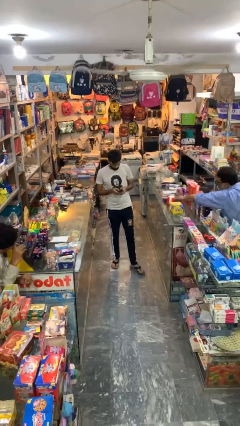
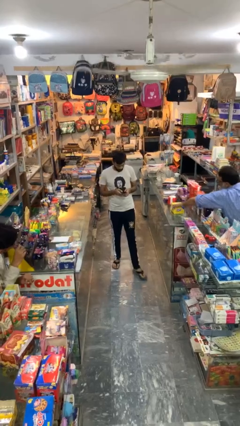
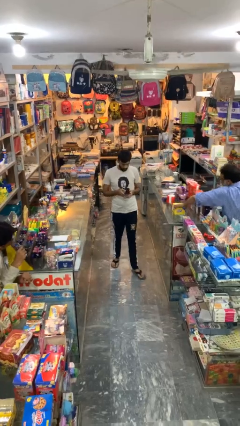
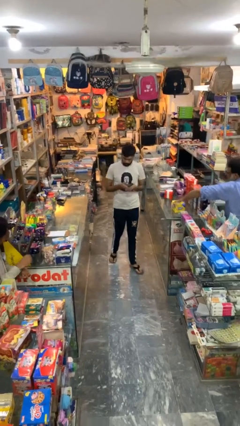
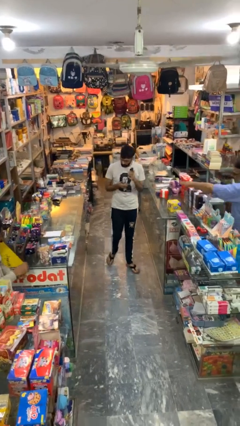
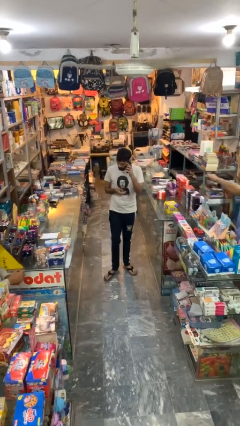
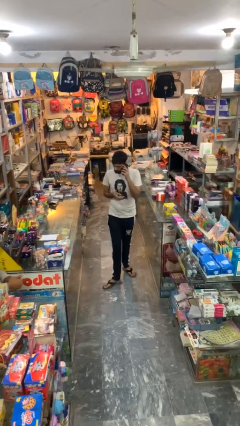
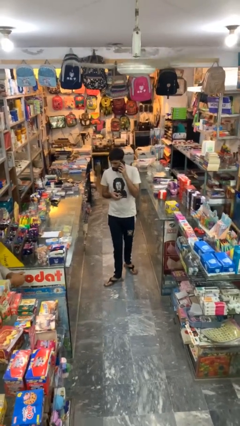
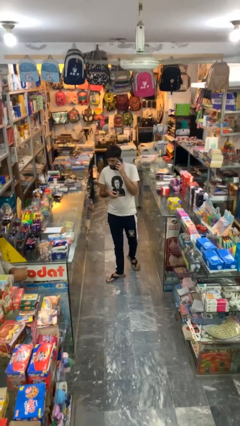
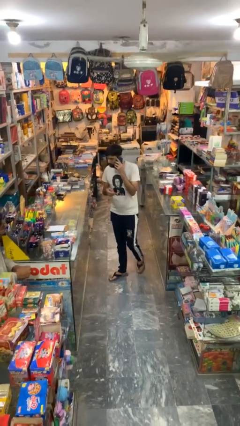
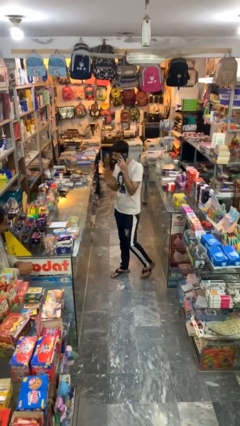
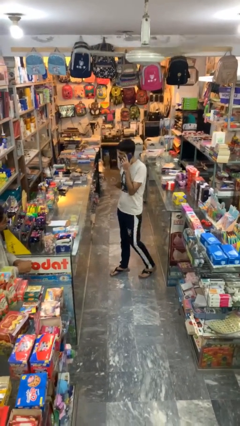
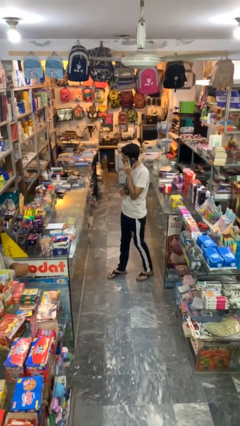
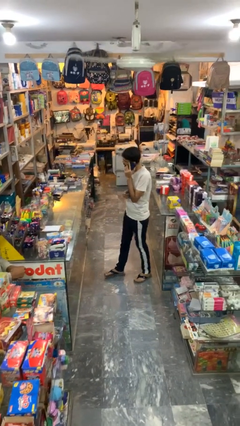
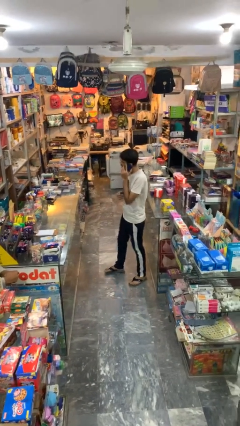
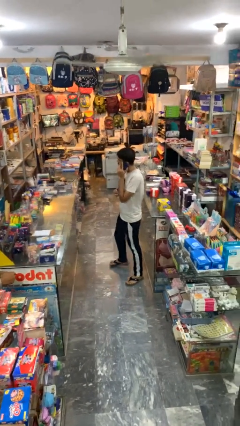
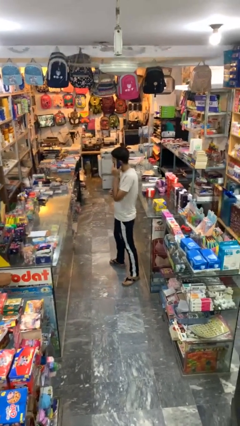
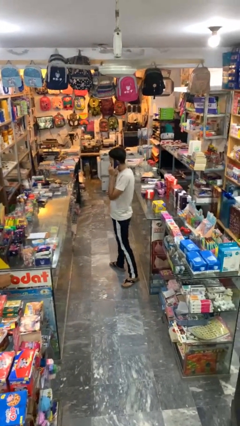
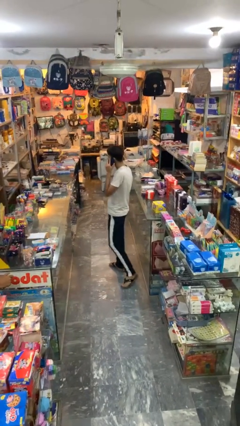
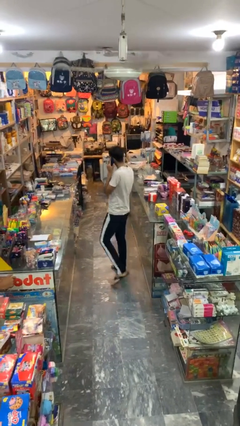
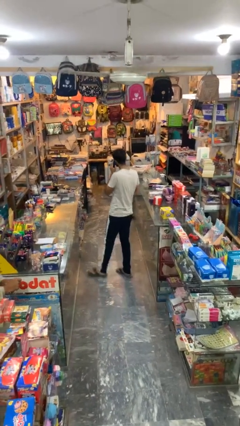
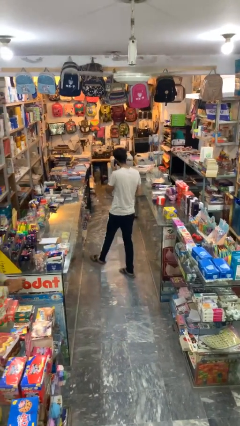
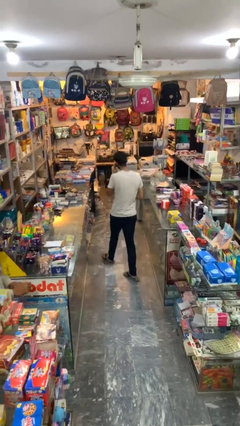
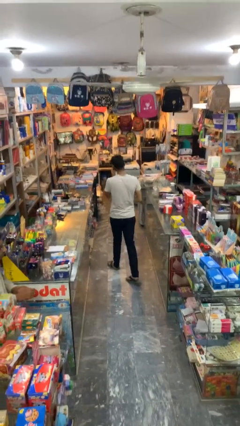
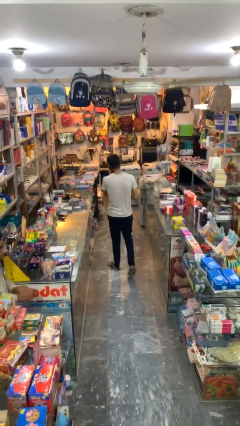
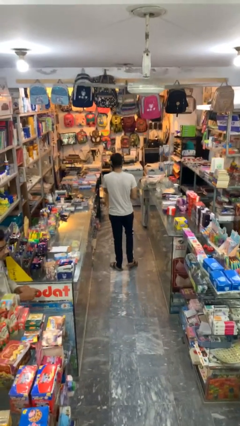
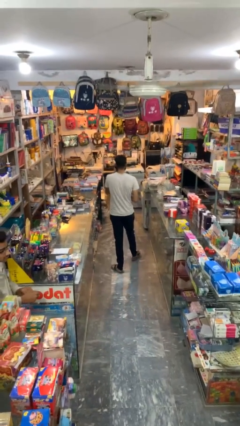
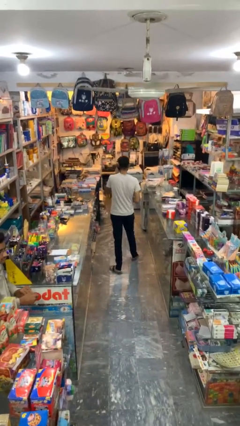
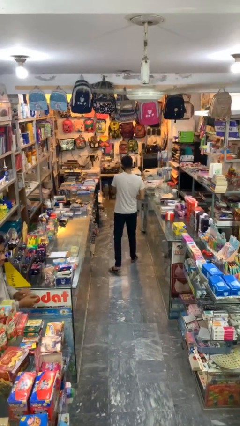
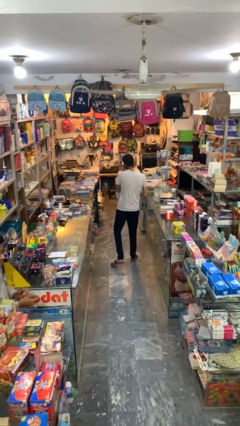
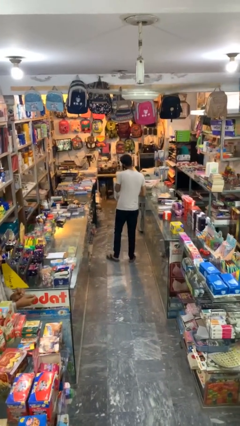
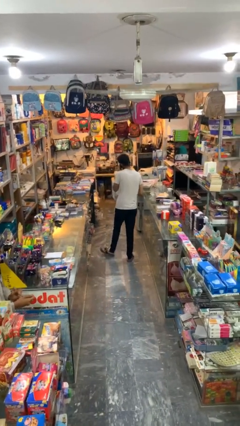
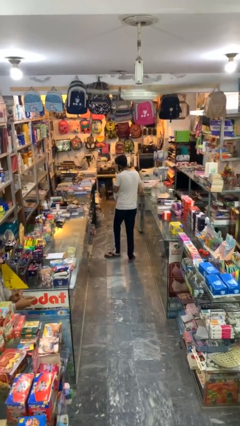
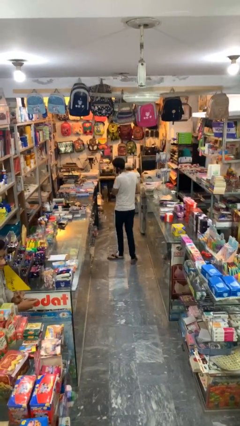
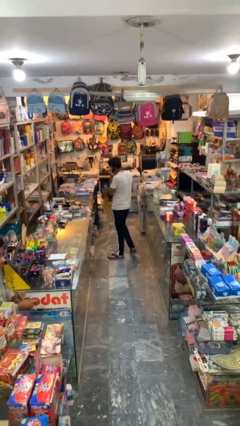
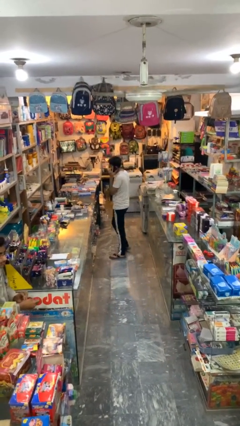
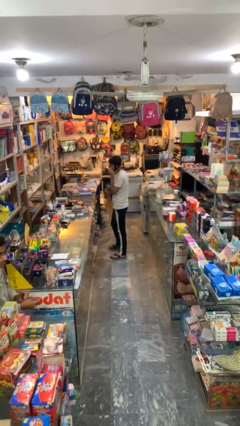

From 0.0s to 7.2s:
person talks on phone

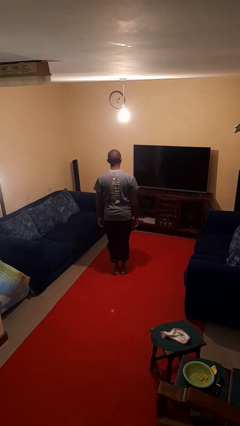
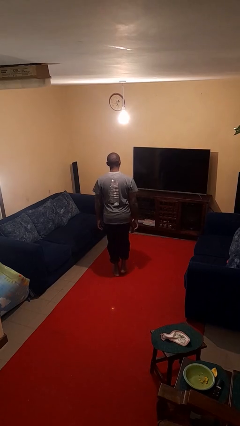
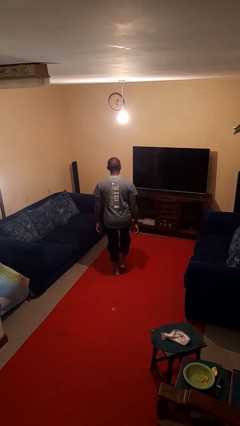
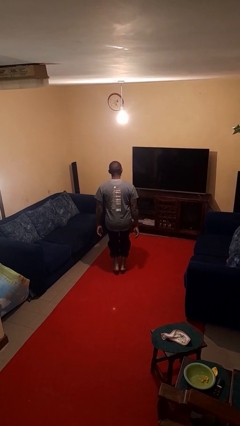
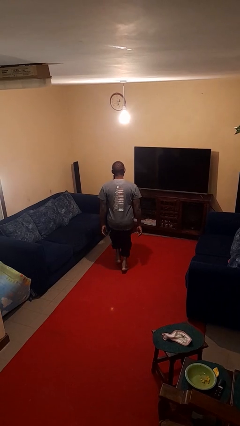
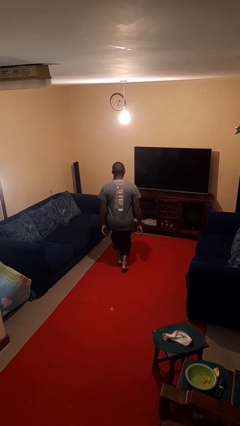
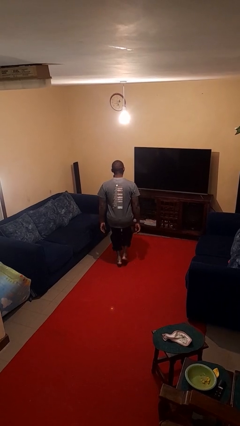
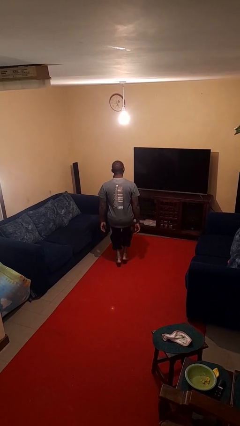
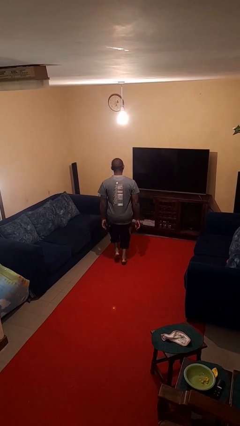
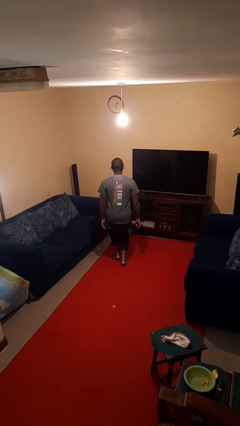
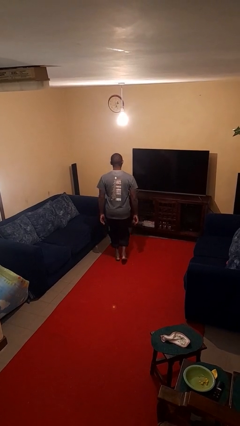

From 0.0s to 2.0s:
person walks tiptoe

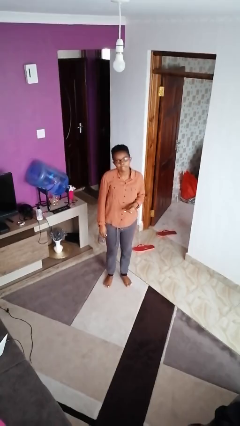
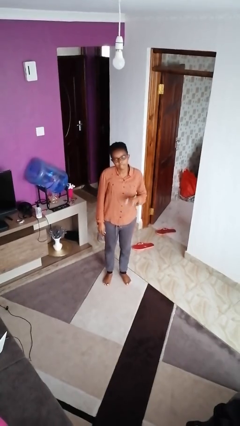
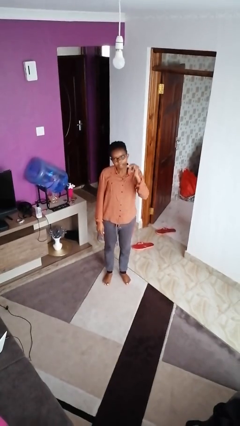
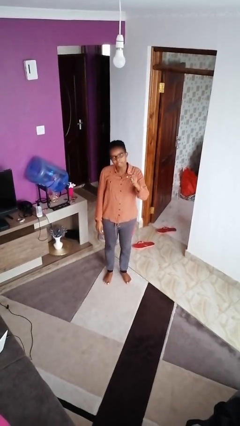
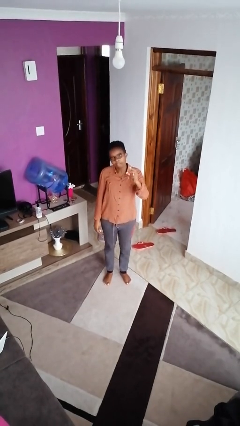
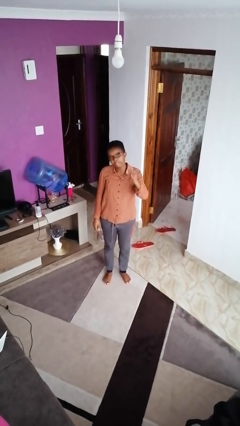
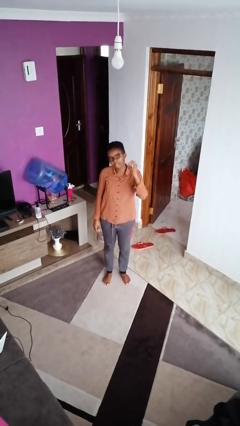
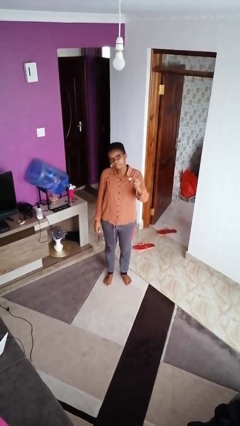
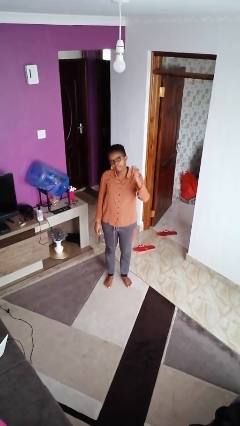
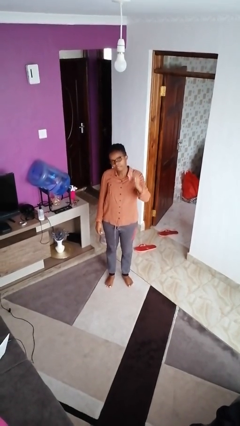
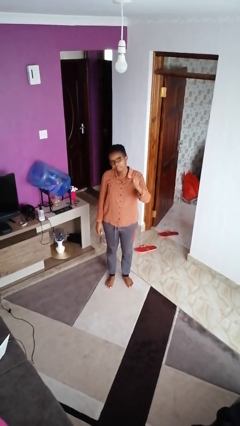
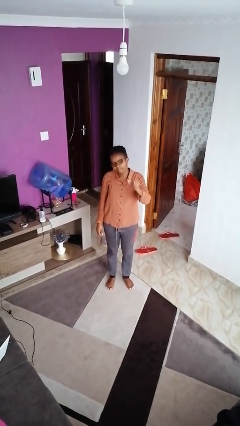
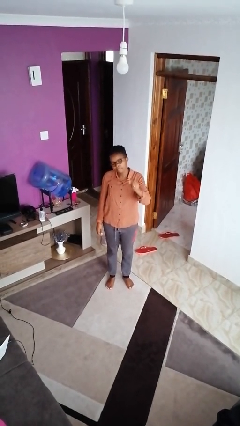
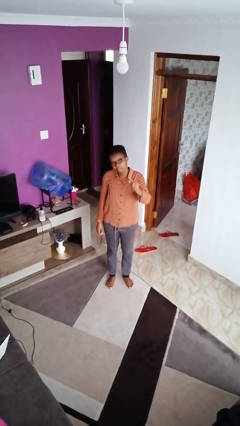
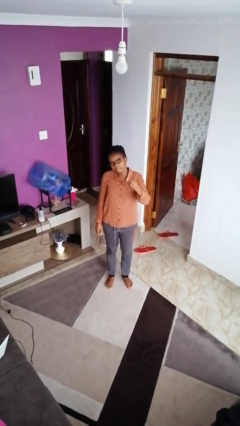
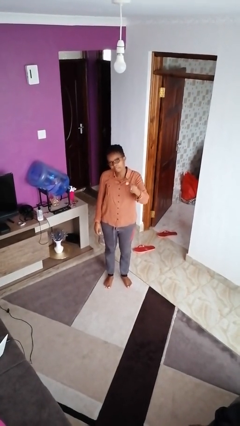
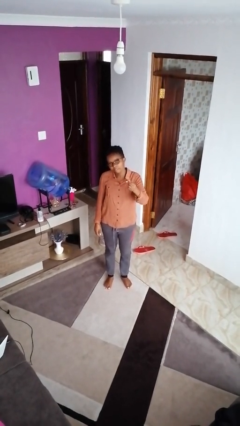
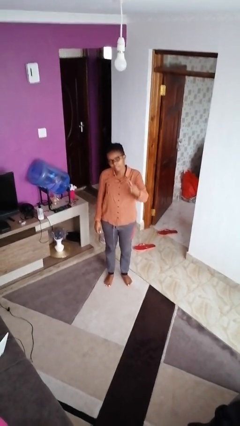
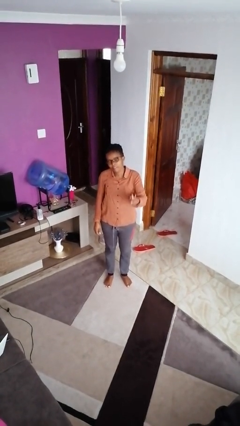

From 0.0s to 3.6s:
person snaps fingers

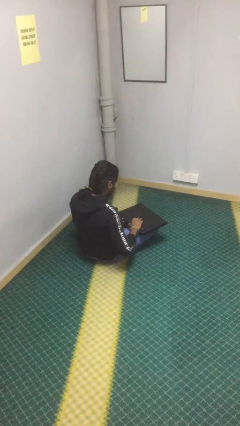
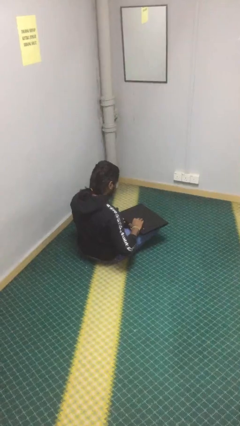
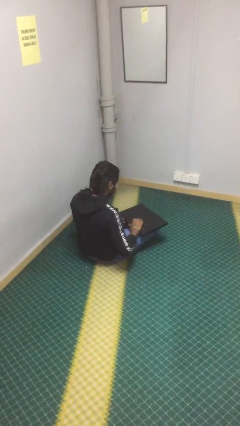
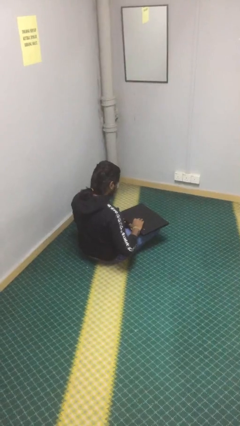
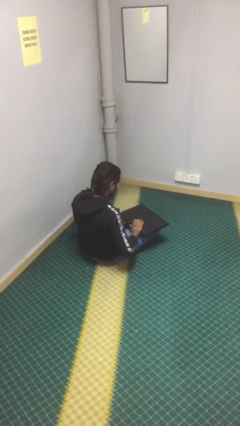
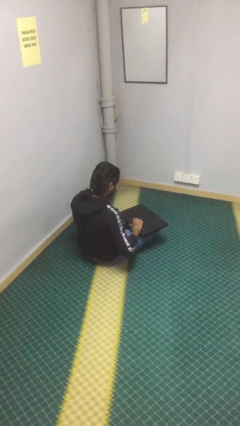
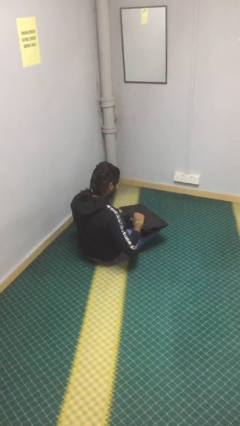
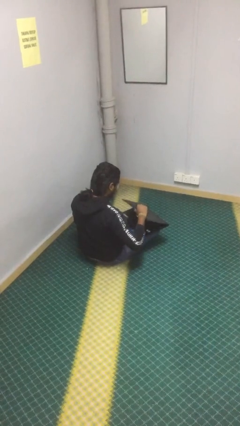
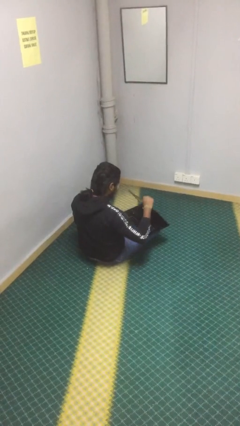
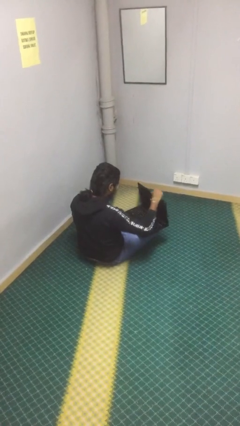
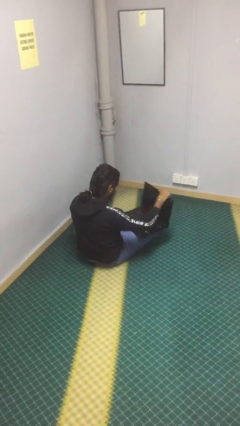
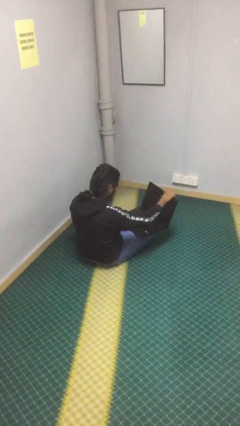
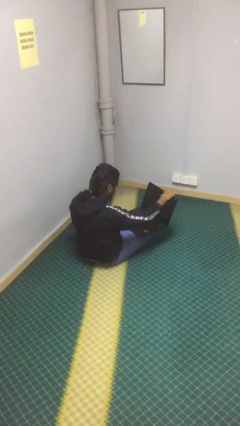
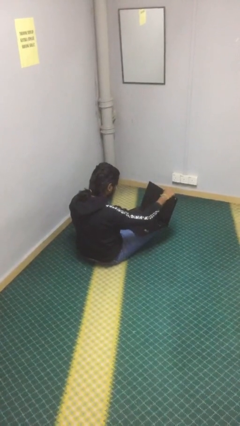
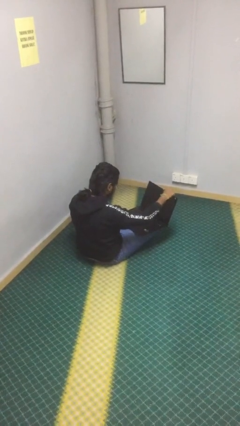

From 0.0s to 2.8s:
person opens laptop

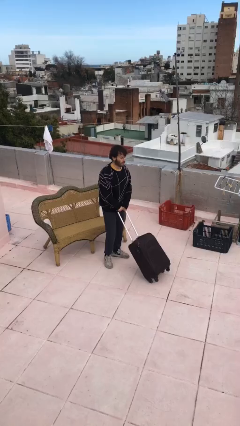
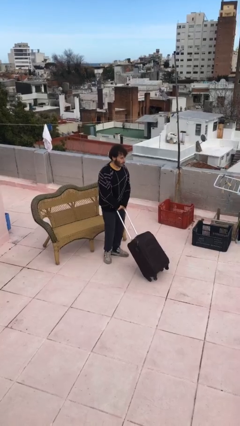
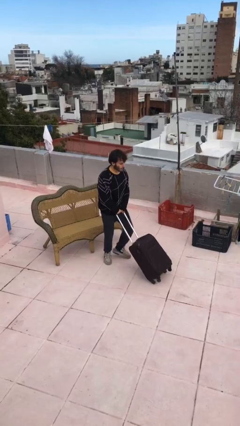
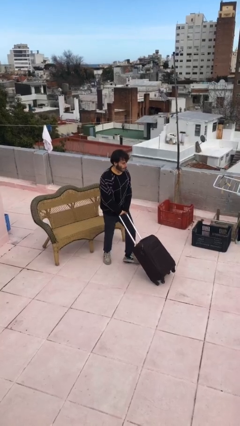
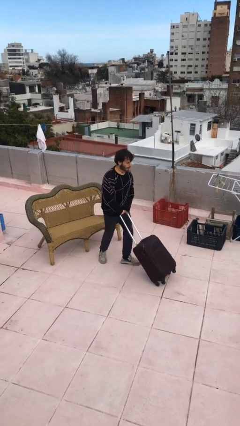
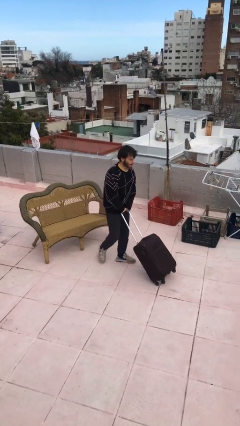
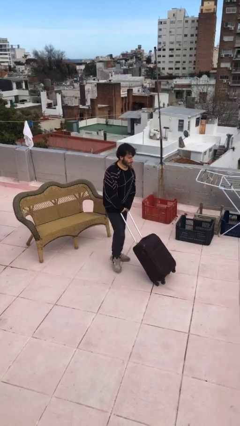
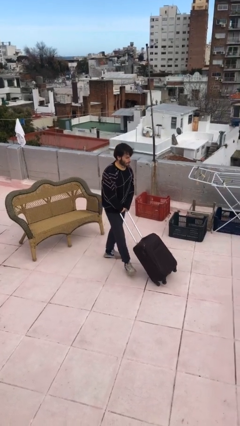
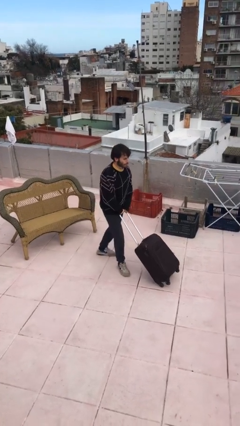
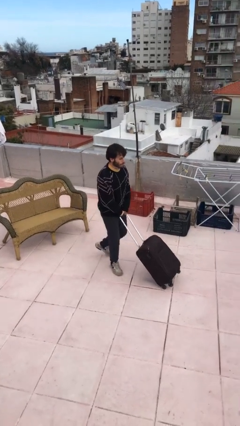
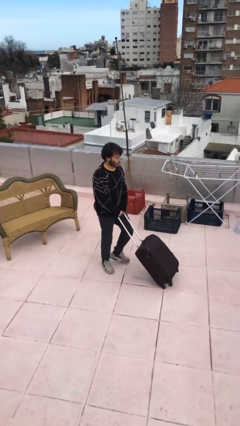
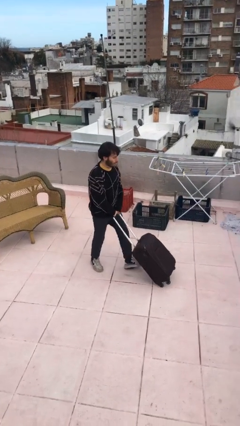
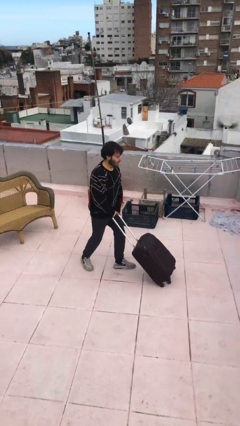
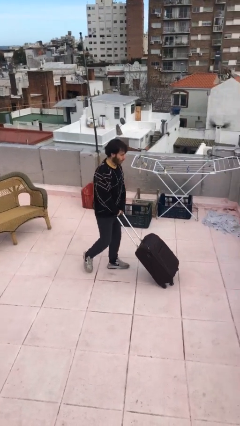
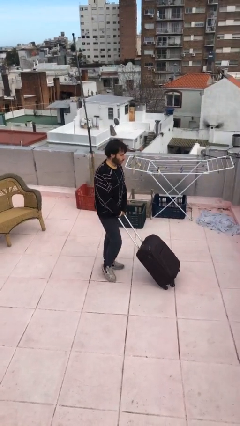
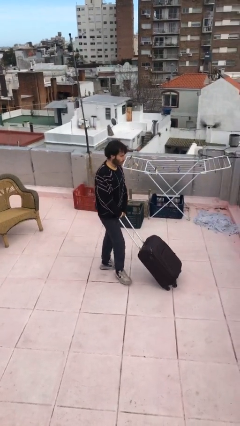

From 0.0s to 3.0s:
person pushes wheeled cart
